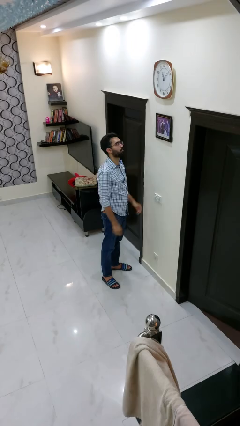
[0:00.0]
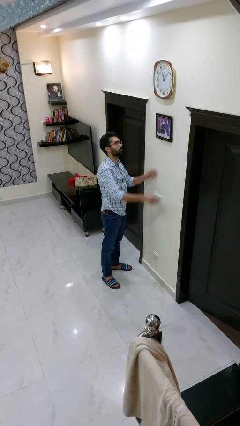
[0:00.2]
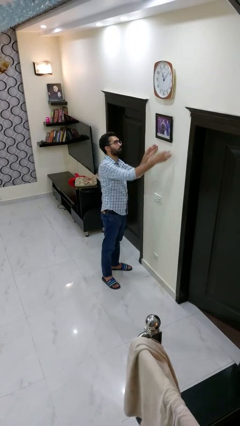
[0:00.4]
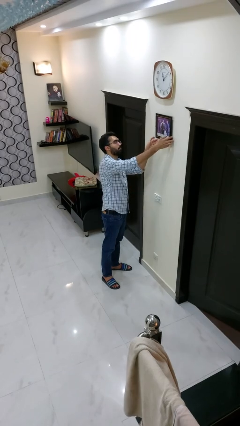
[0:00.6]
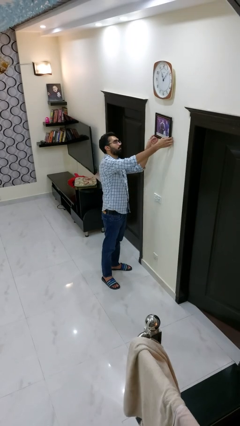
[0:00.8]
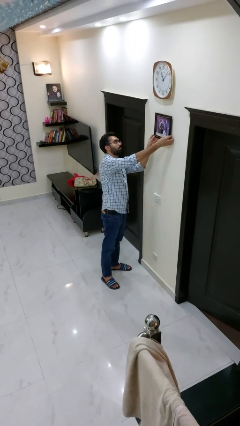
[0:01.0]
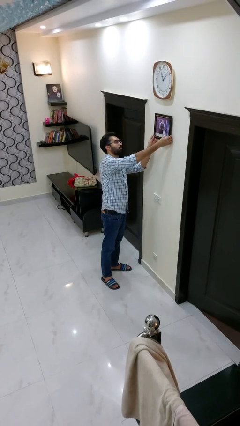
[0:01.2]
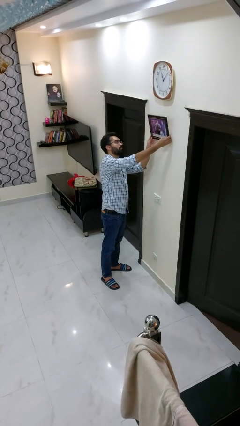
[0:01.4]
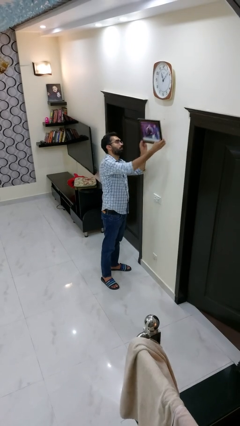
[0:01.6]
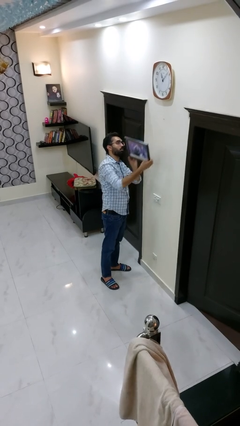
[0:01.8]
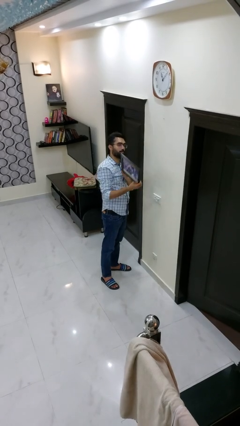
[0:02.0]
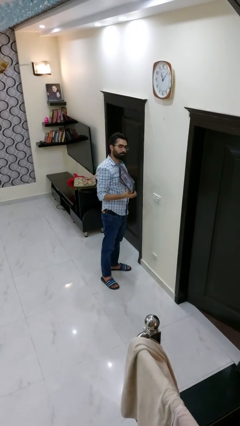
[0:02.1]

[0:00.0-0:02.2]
person takes down picture frame

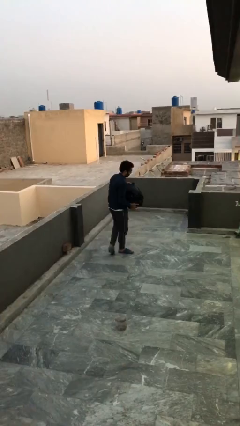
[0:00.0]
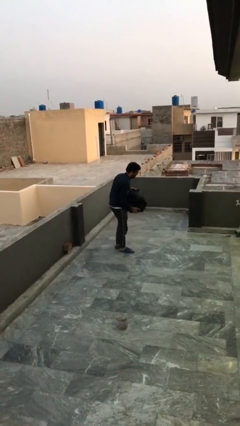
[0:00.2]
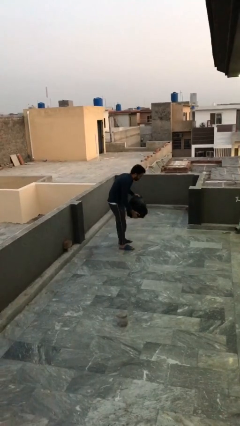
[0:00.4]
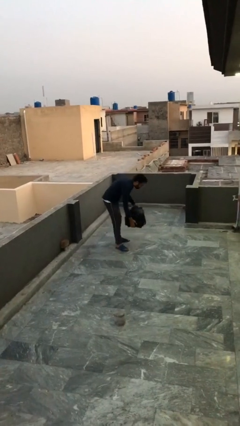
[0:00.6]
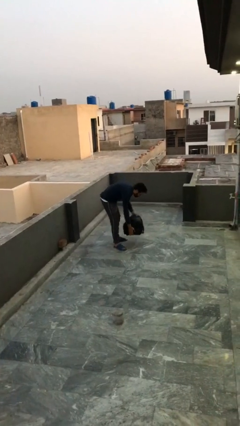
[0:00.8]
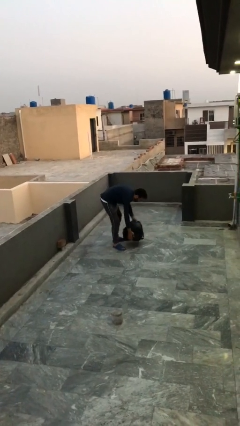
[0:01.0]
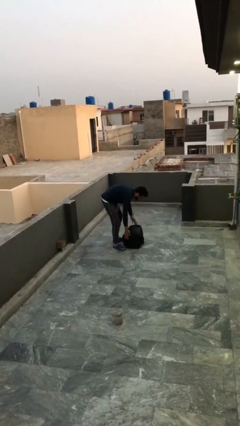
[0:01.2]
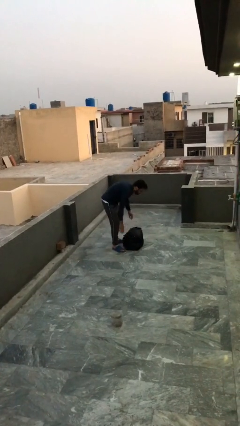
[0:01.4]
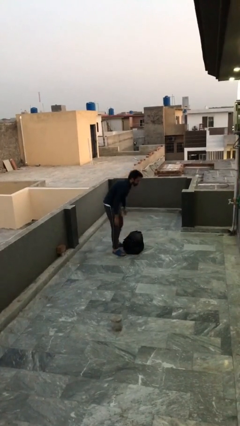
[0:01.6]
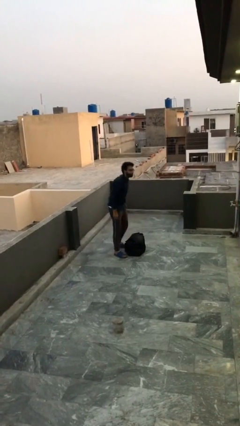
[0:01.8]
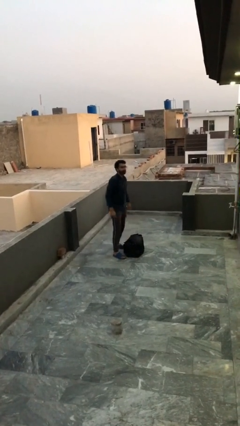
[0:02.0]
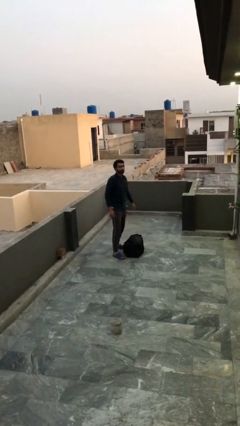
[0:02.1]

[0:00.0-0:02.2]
person puts down object on floor

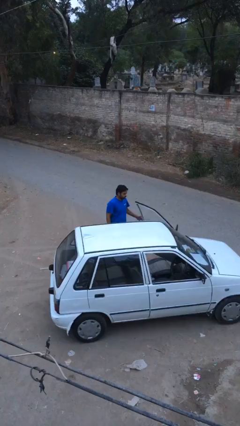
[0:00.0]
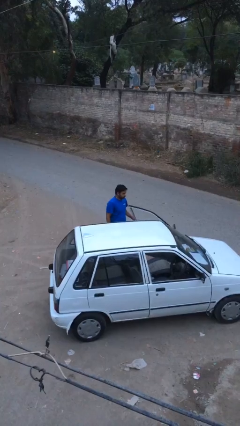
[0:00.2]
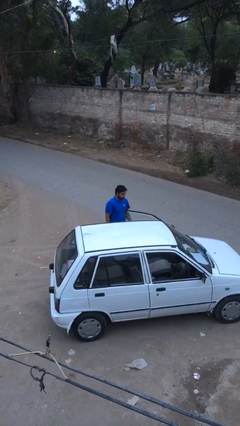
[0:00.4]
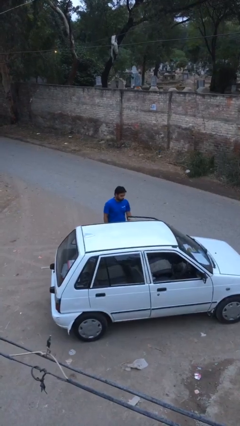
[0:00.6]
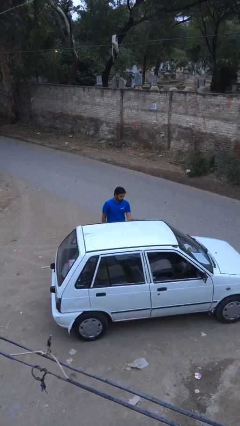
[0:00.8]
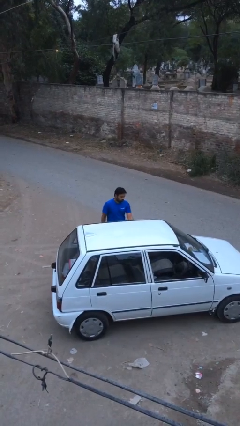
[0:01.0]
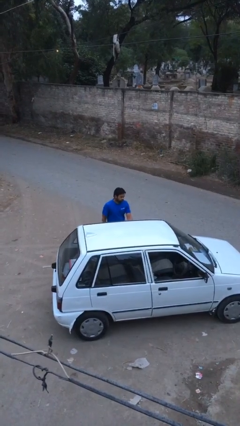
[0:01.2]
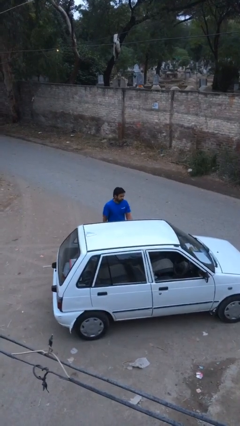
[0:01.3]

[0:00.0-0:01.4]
person closes car door

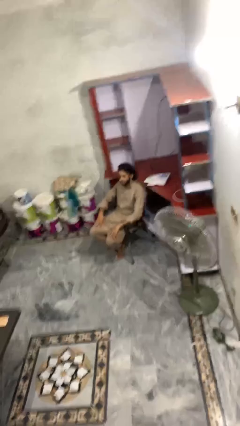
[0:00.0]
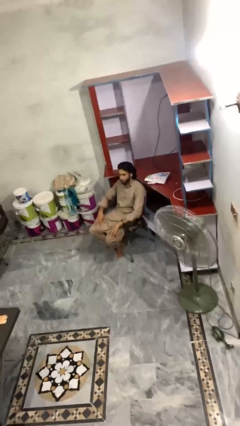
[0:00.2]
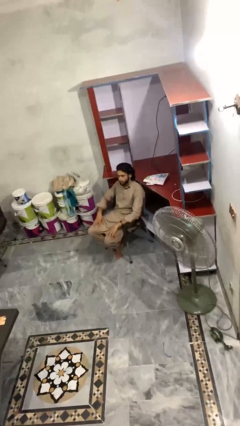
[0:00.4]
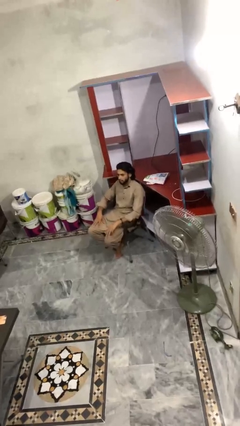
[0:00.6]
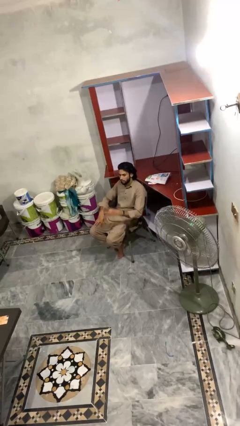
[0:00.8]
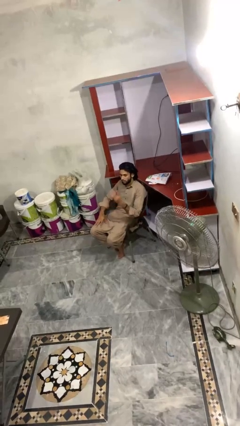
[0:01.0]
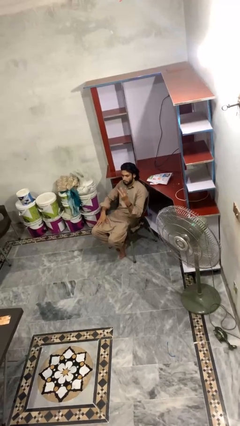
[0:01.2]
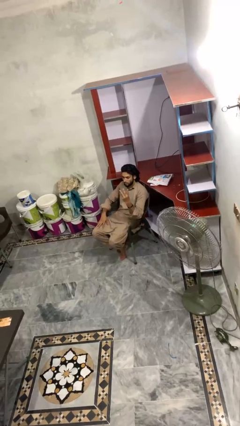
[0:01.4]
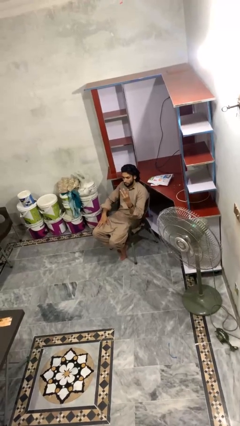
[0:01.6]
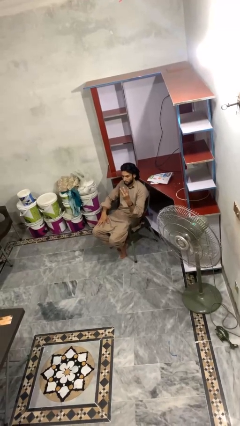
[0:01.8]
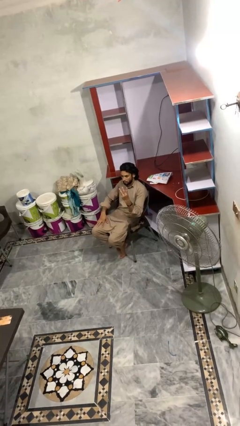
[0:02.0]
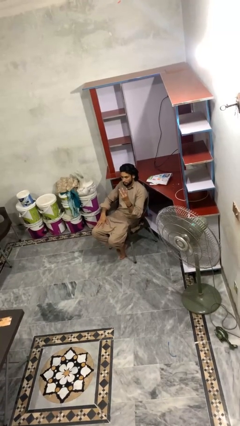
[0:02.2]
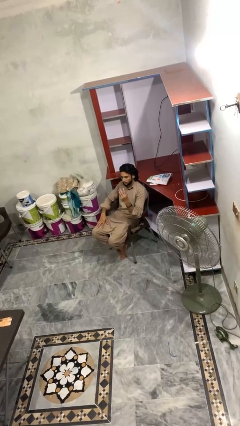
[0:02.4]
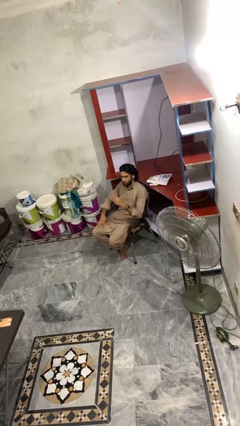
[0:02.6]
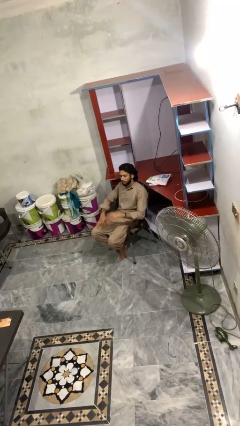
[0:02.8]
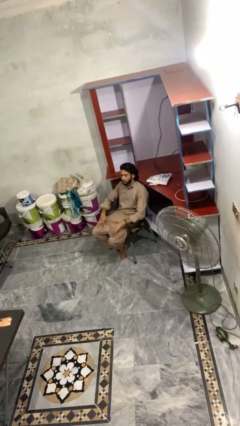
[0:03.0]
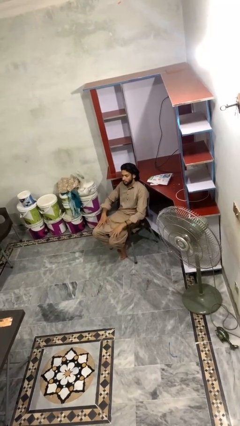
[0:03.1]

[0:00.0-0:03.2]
person gestures number three

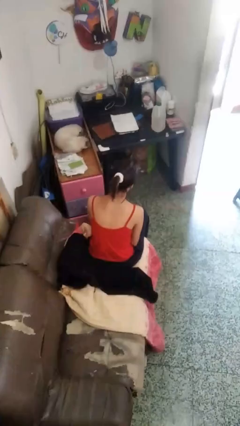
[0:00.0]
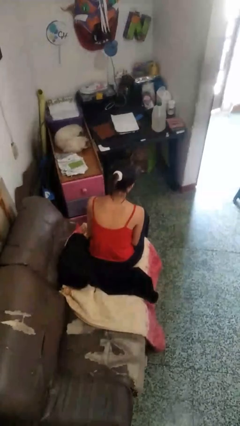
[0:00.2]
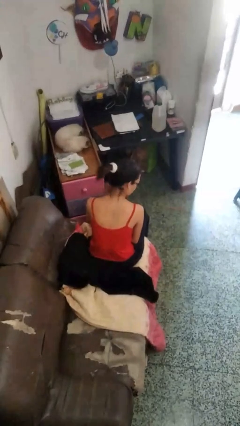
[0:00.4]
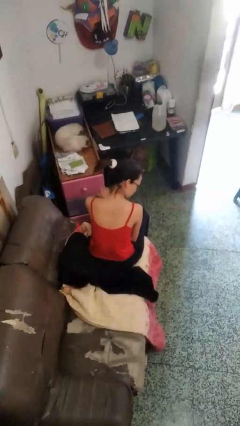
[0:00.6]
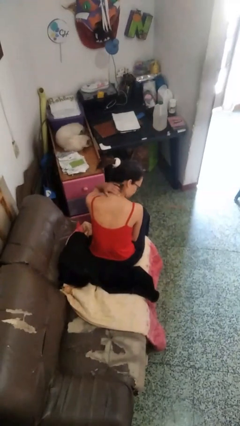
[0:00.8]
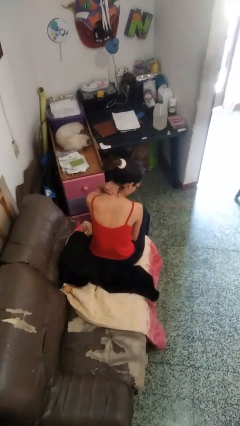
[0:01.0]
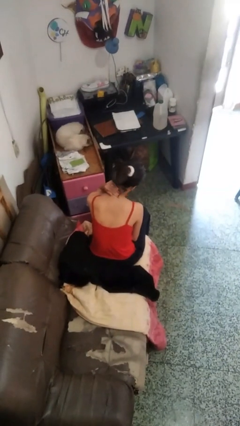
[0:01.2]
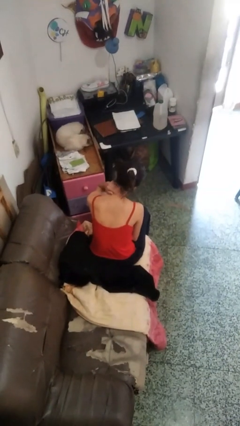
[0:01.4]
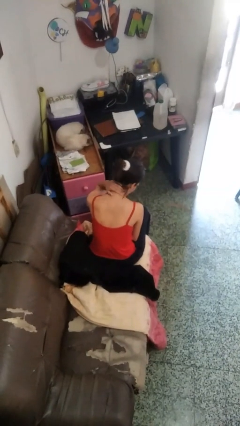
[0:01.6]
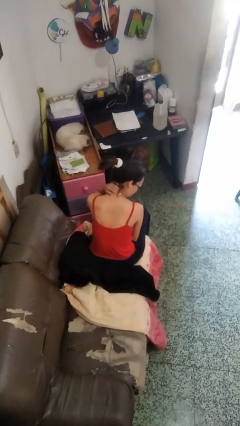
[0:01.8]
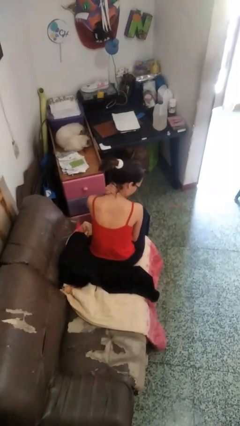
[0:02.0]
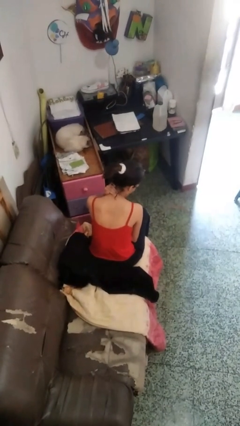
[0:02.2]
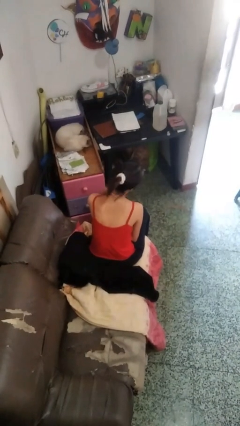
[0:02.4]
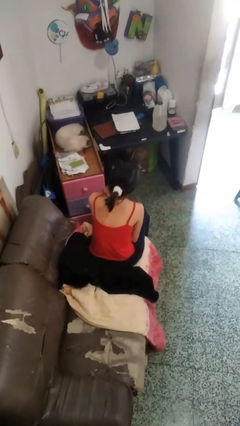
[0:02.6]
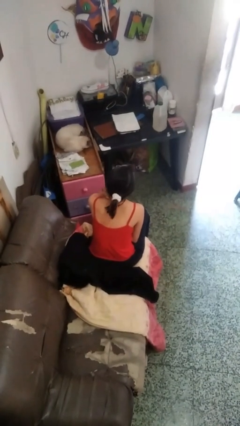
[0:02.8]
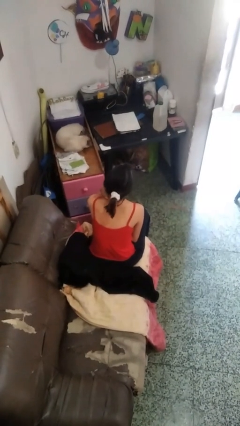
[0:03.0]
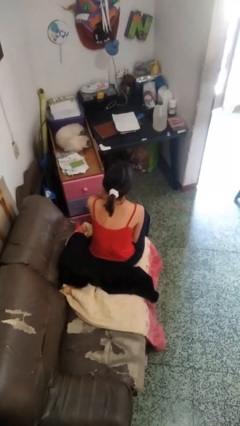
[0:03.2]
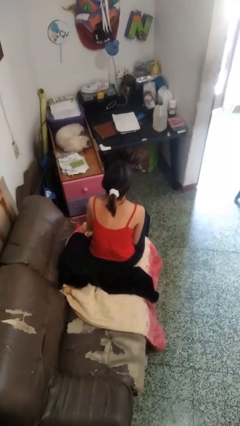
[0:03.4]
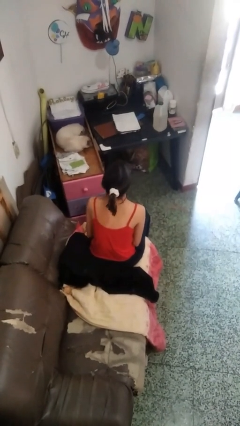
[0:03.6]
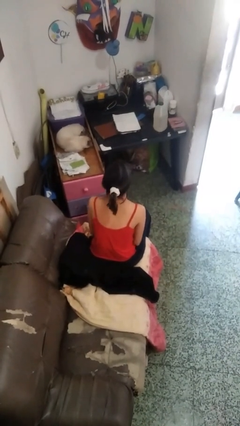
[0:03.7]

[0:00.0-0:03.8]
person rubs neck

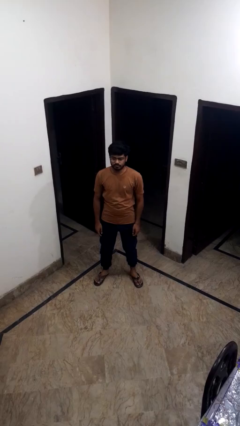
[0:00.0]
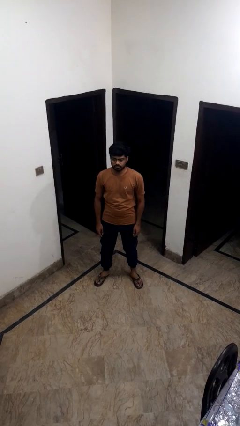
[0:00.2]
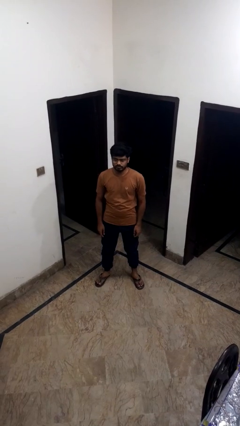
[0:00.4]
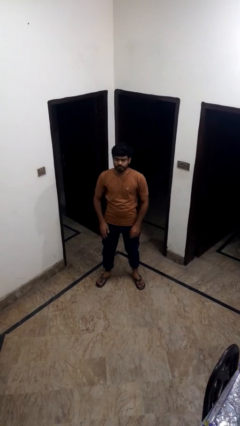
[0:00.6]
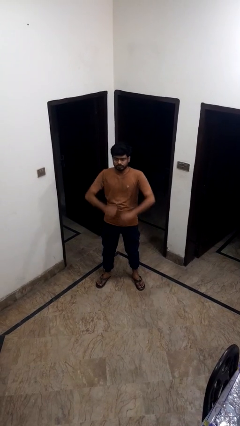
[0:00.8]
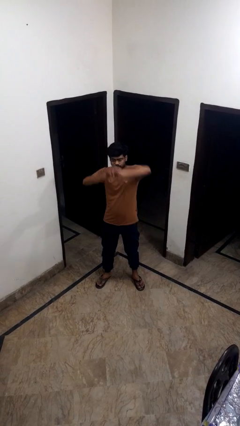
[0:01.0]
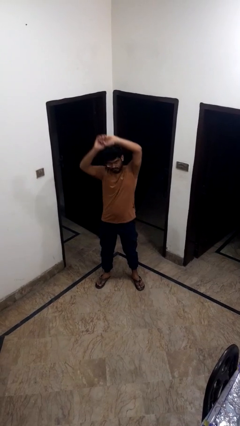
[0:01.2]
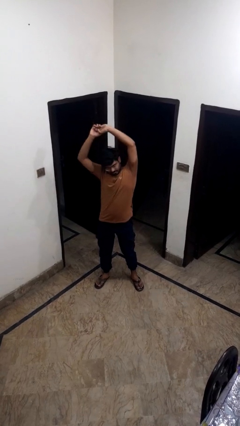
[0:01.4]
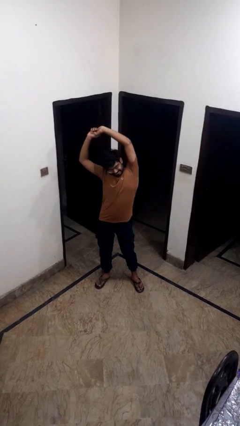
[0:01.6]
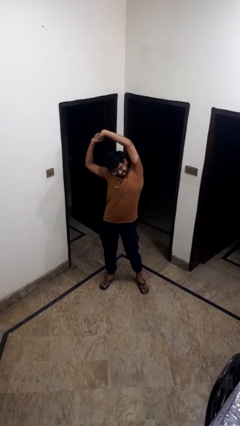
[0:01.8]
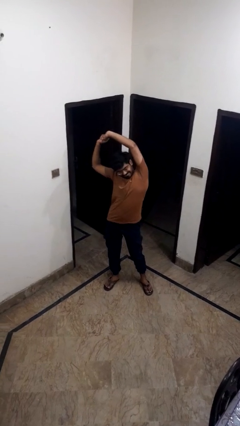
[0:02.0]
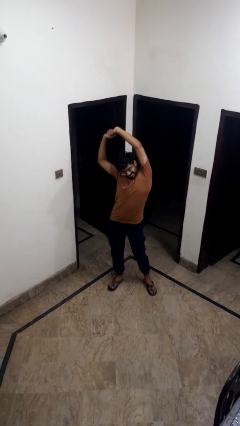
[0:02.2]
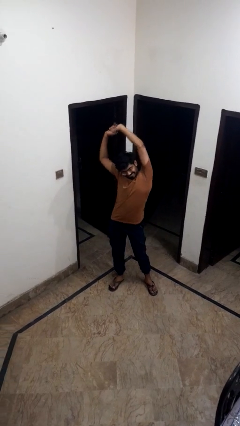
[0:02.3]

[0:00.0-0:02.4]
person unties jacket around waist

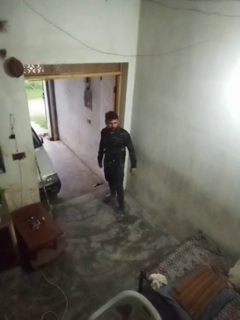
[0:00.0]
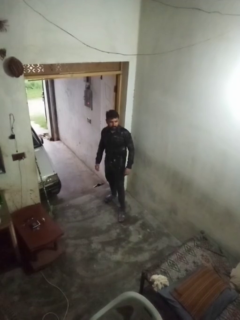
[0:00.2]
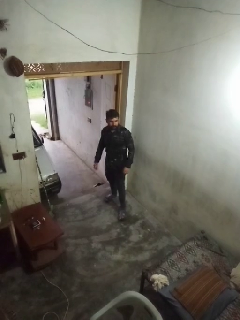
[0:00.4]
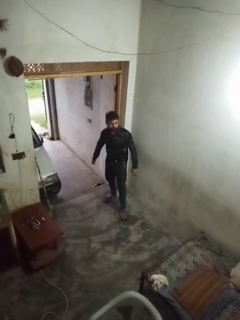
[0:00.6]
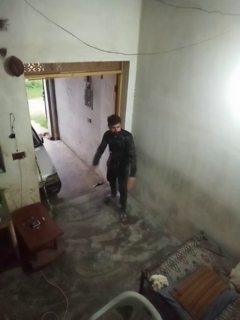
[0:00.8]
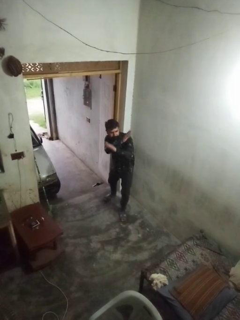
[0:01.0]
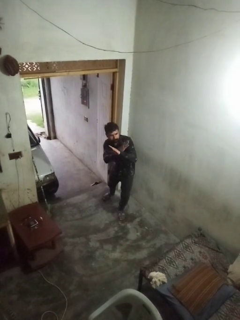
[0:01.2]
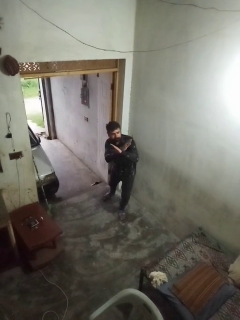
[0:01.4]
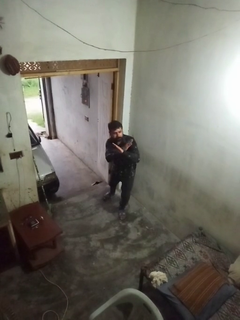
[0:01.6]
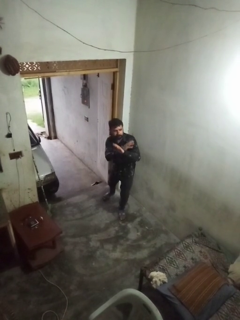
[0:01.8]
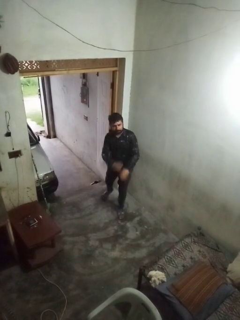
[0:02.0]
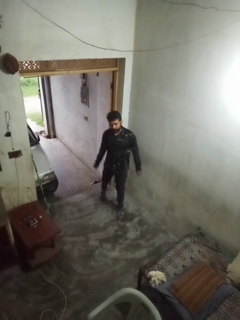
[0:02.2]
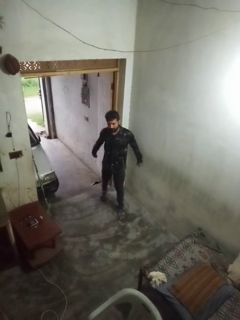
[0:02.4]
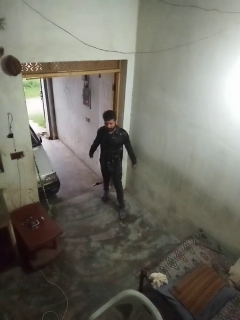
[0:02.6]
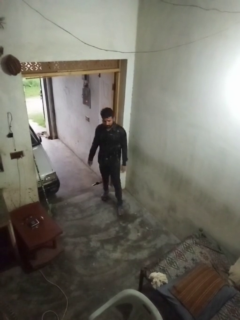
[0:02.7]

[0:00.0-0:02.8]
person karate chop
